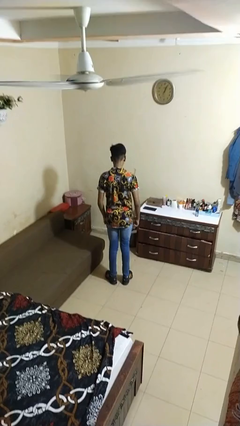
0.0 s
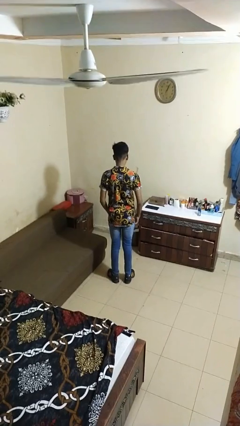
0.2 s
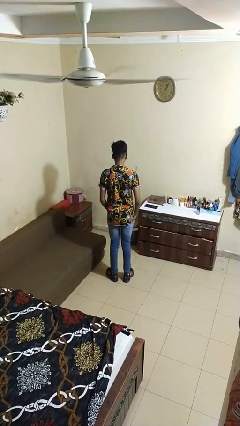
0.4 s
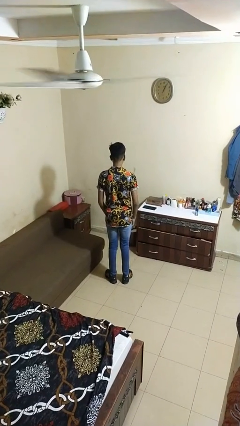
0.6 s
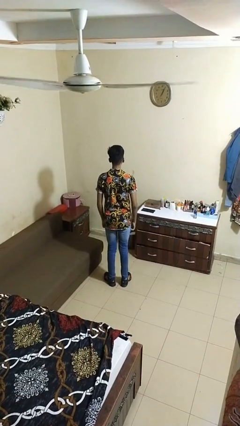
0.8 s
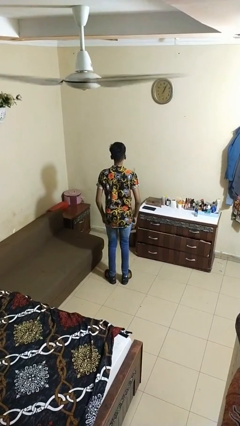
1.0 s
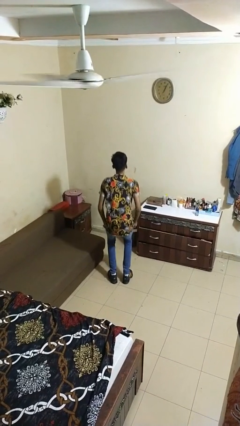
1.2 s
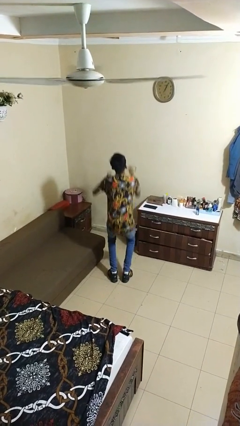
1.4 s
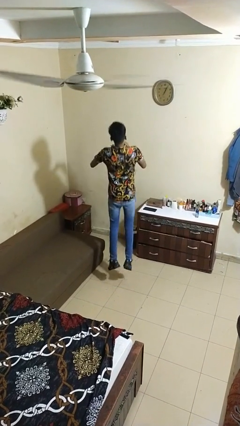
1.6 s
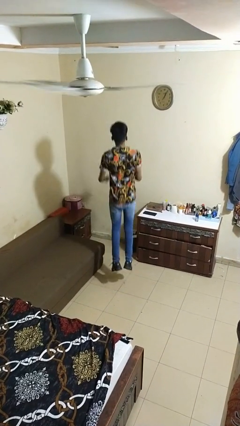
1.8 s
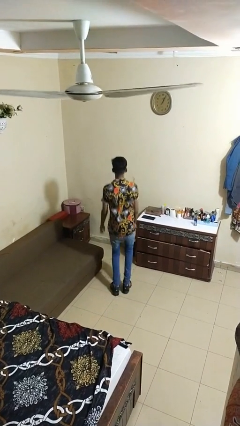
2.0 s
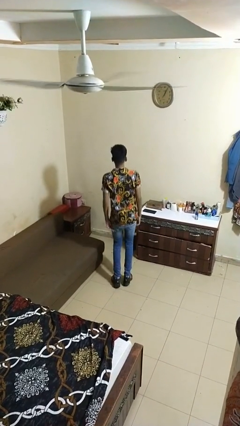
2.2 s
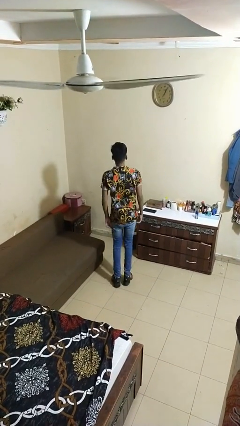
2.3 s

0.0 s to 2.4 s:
person jumps

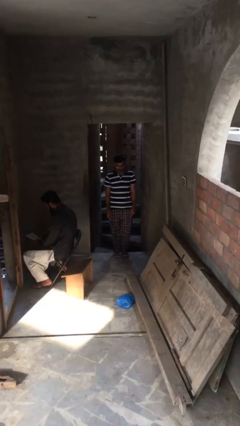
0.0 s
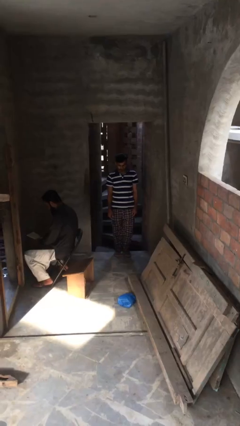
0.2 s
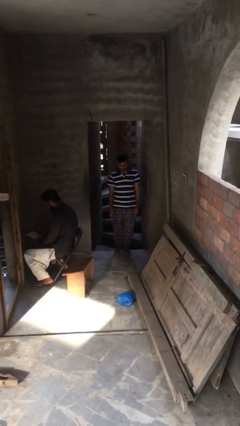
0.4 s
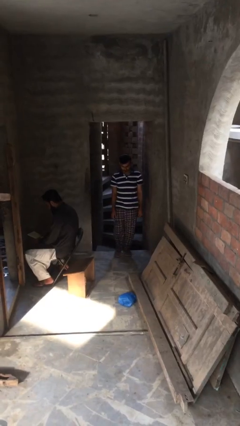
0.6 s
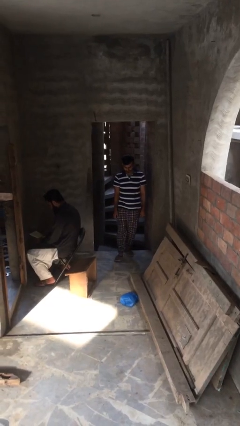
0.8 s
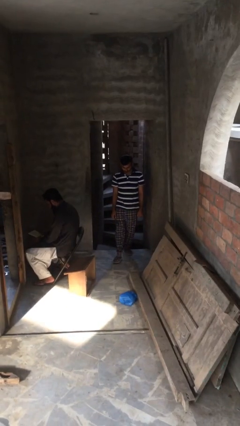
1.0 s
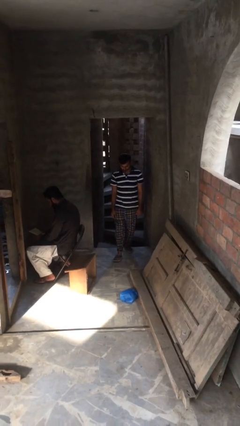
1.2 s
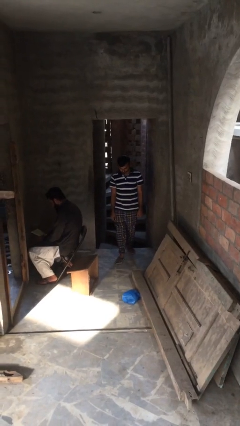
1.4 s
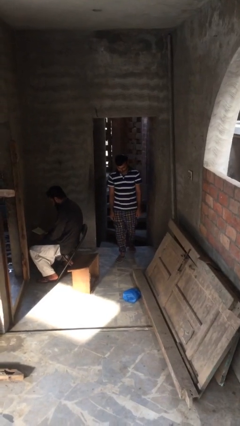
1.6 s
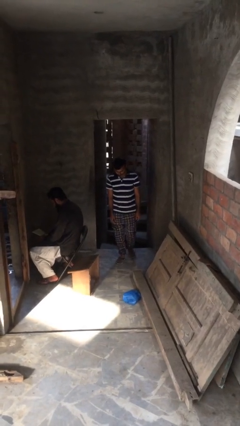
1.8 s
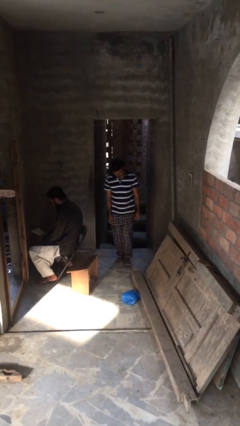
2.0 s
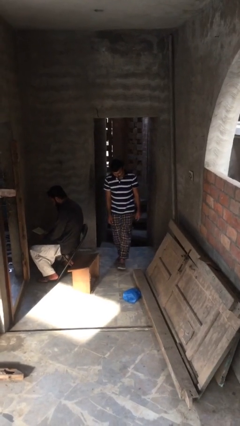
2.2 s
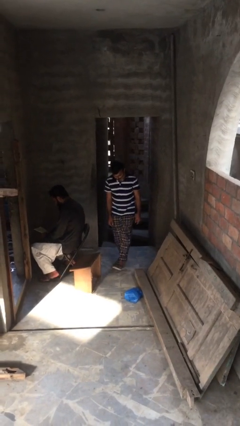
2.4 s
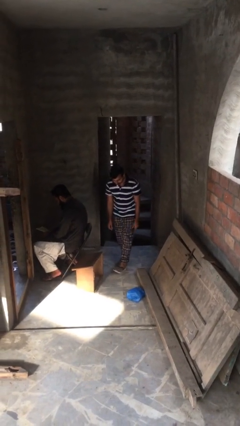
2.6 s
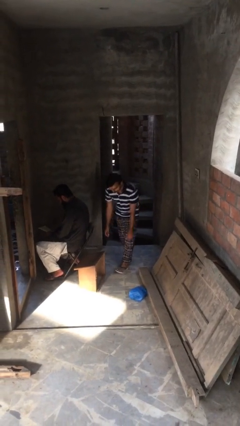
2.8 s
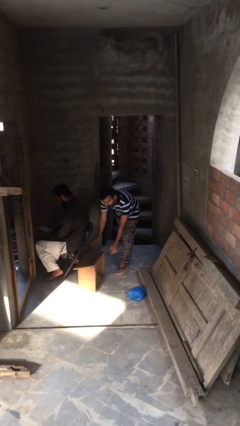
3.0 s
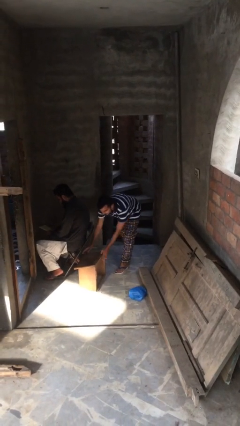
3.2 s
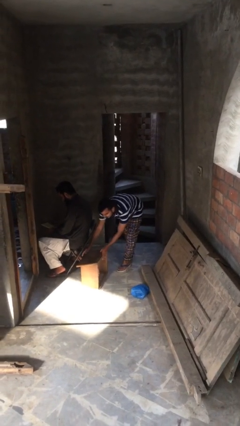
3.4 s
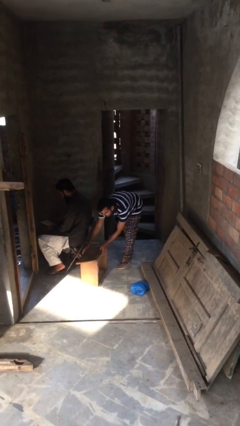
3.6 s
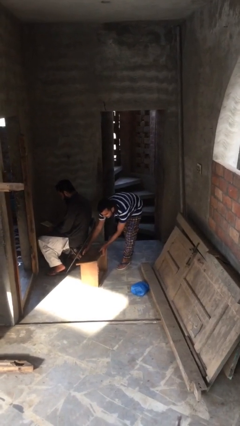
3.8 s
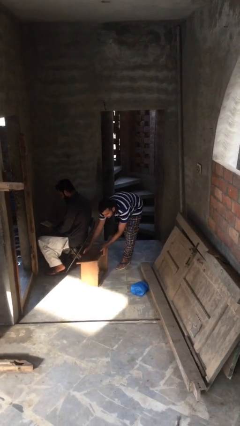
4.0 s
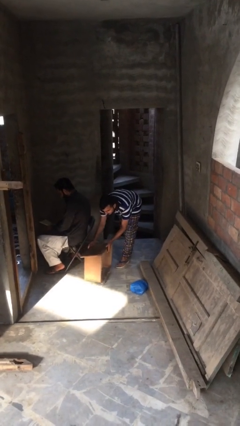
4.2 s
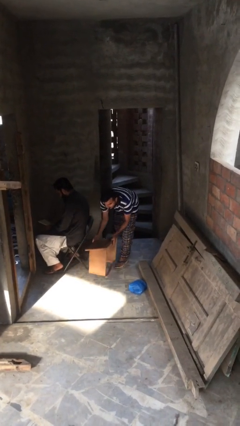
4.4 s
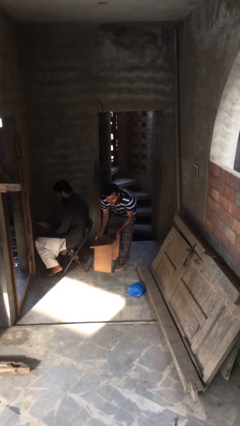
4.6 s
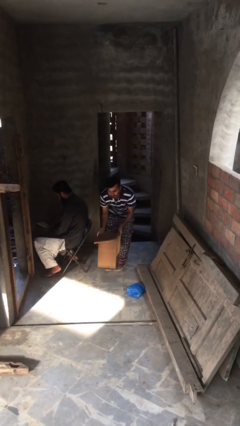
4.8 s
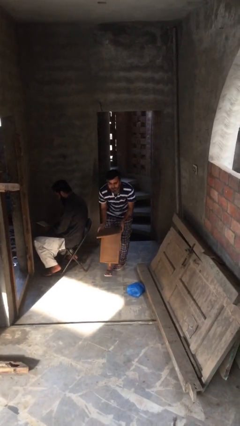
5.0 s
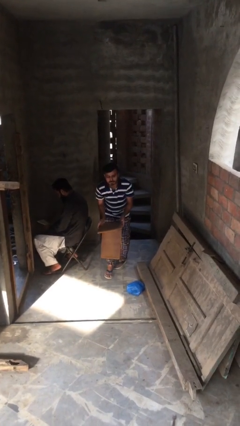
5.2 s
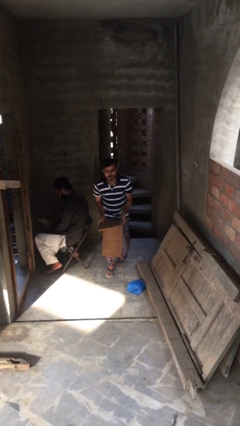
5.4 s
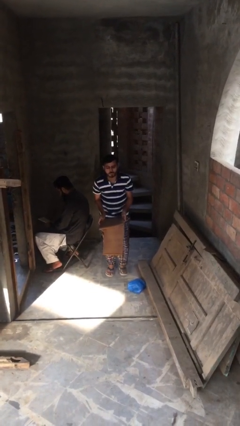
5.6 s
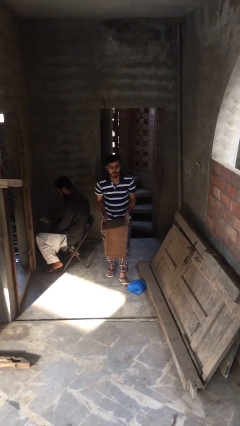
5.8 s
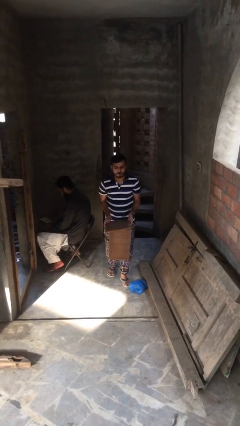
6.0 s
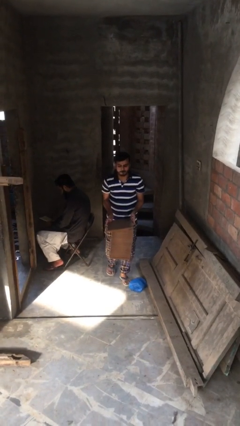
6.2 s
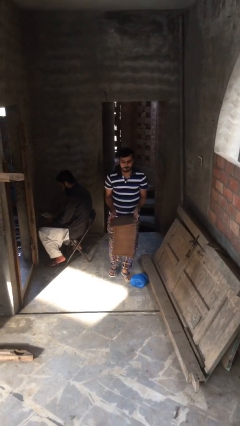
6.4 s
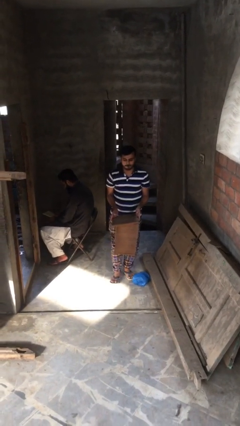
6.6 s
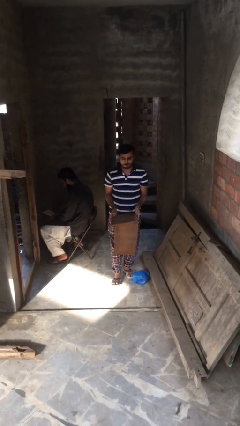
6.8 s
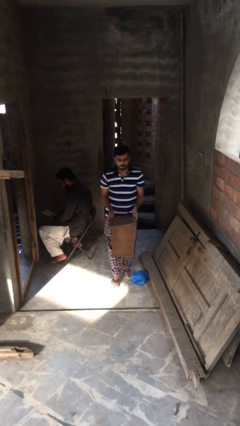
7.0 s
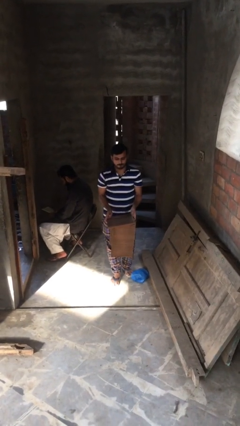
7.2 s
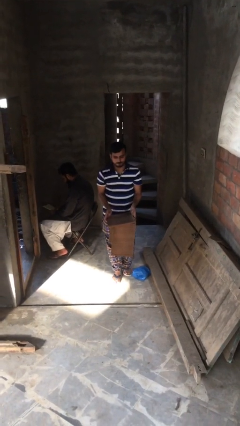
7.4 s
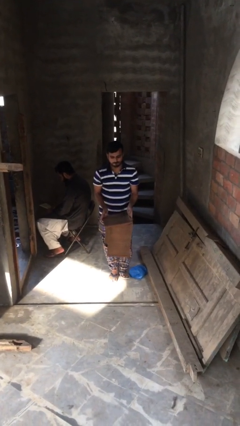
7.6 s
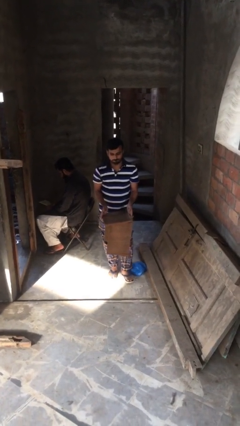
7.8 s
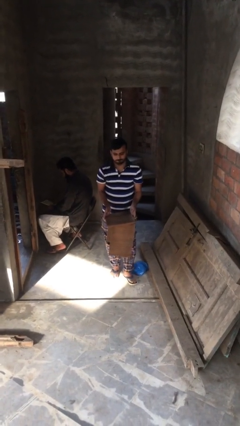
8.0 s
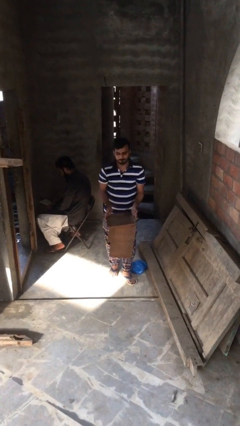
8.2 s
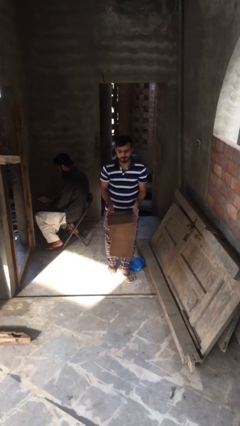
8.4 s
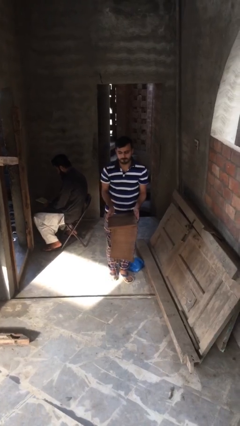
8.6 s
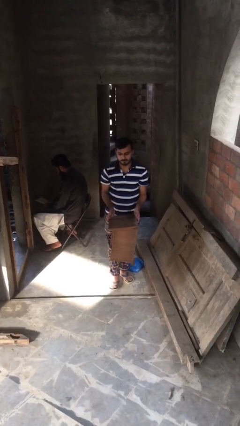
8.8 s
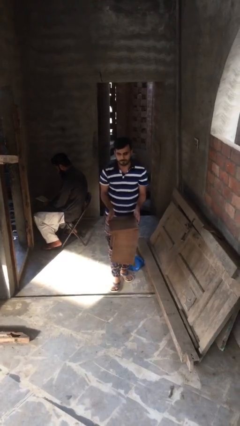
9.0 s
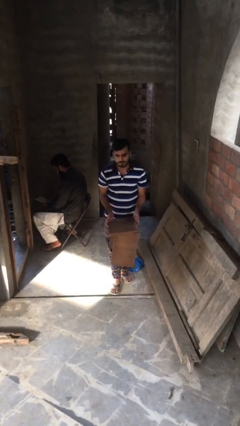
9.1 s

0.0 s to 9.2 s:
person steals object from person

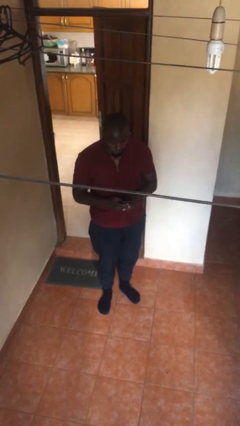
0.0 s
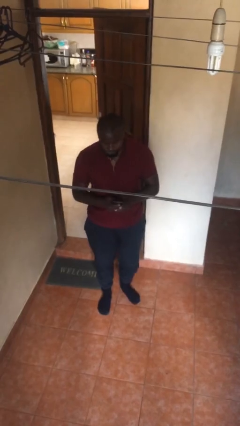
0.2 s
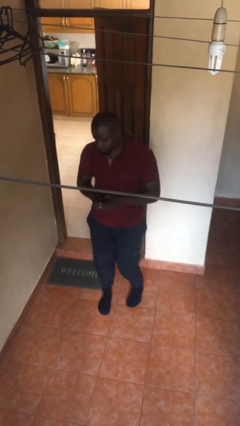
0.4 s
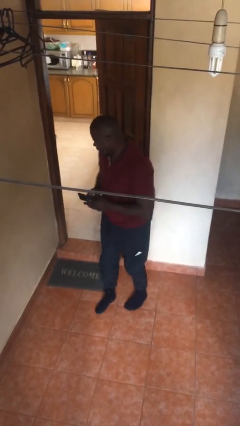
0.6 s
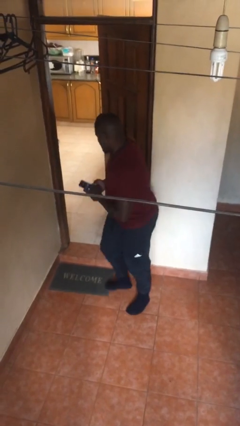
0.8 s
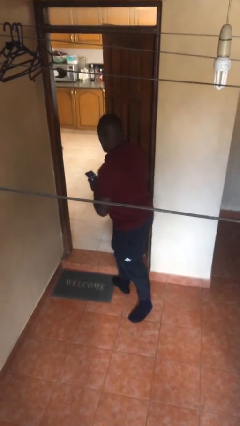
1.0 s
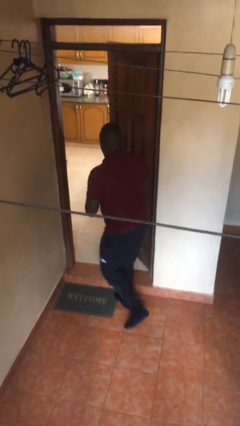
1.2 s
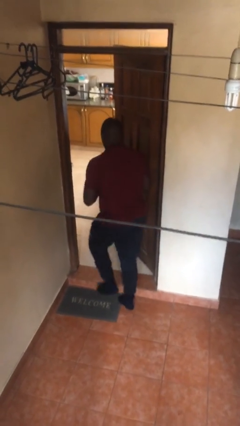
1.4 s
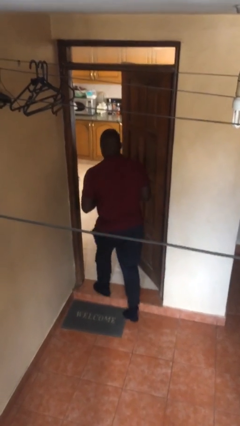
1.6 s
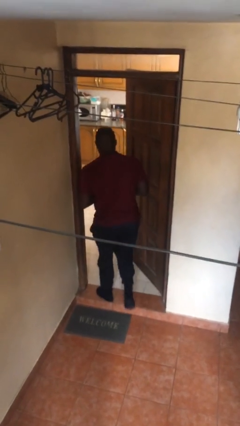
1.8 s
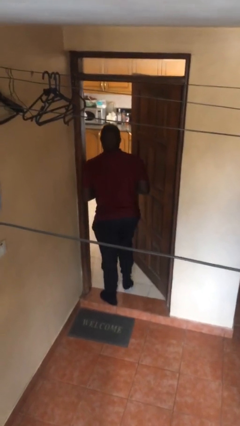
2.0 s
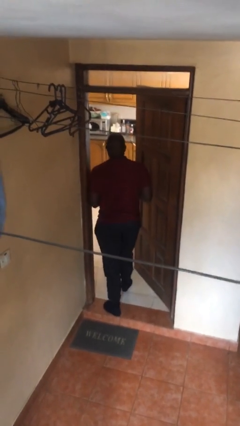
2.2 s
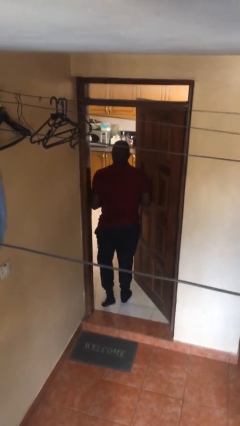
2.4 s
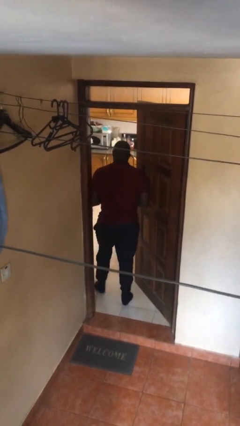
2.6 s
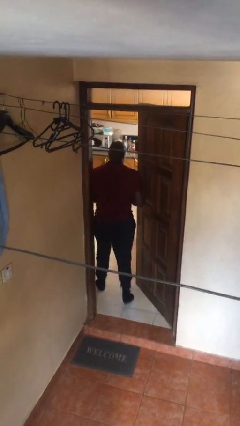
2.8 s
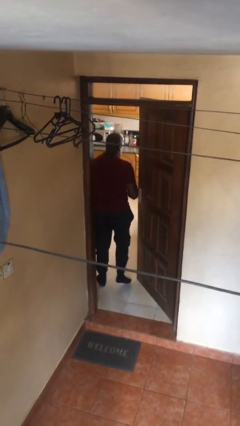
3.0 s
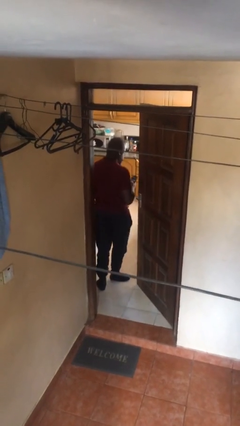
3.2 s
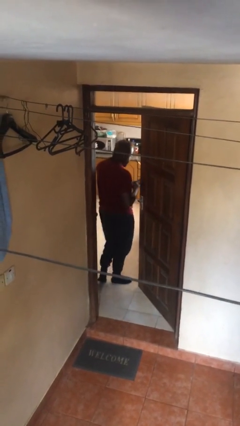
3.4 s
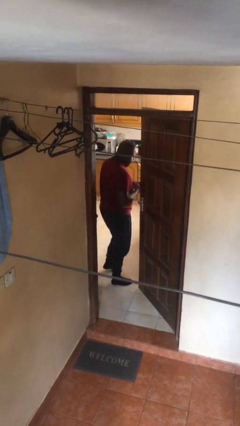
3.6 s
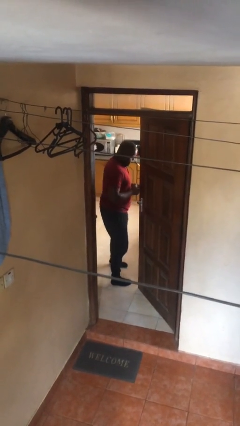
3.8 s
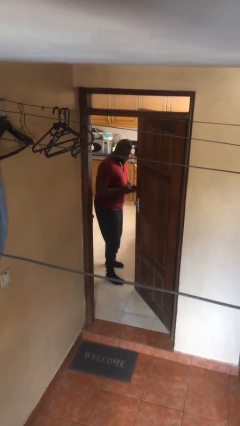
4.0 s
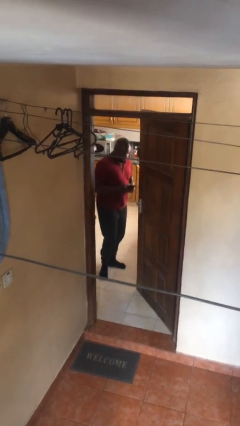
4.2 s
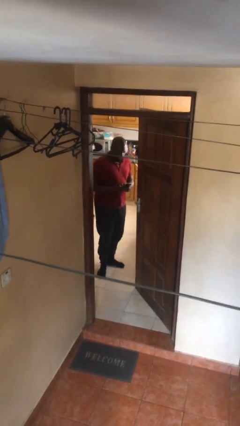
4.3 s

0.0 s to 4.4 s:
person exits scene through structure

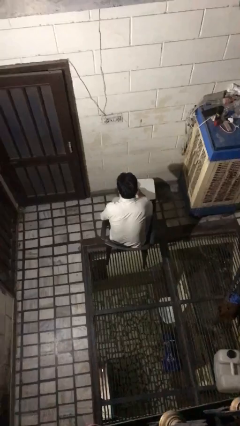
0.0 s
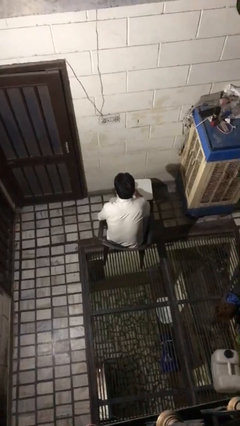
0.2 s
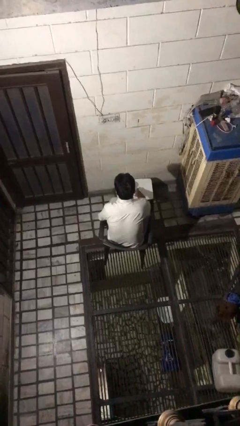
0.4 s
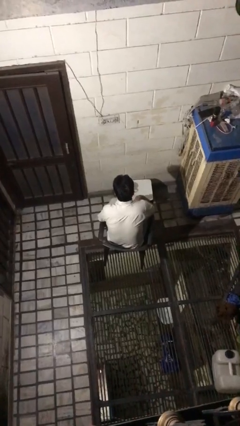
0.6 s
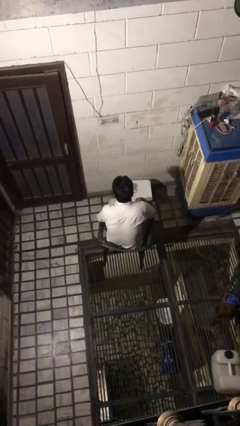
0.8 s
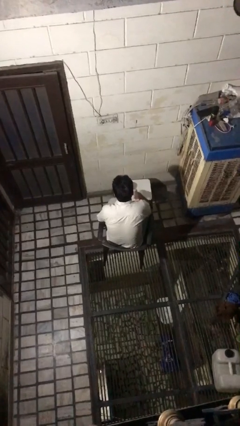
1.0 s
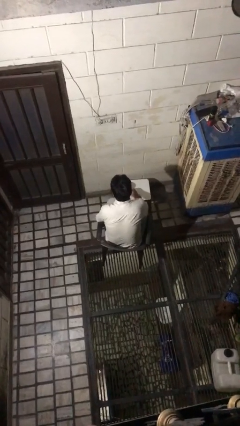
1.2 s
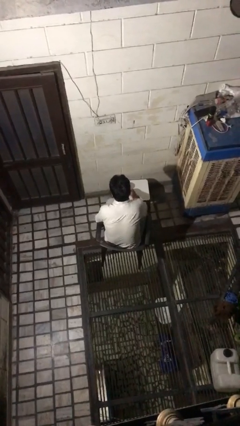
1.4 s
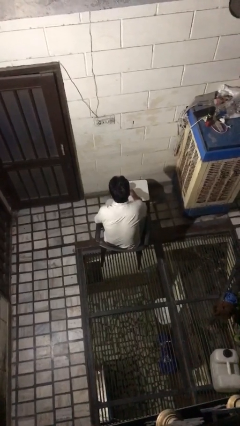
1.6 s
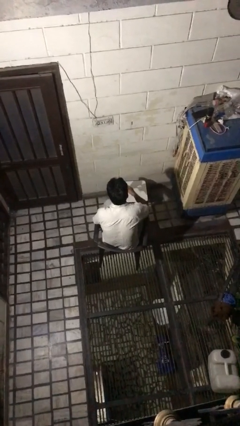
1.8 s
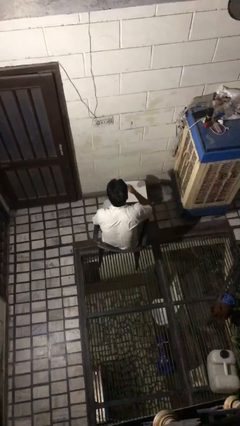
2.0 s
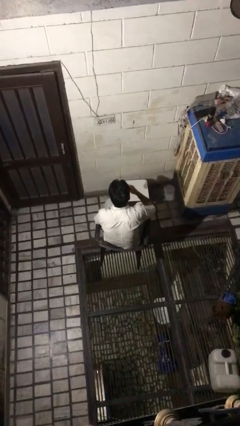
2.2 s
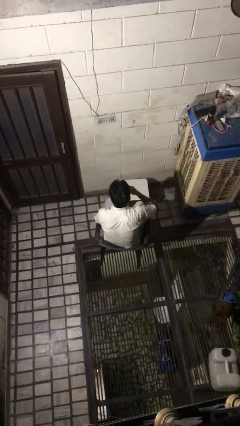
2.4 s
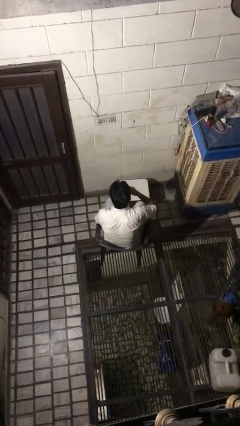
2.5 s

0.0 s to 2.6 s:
person picks up object from table
